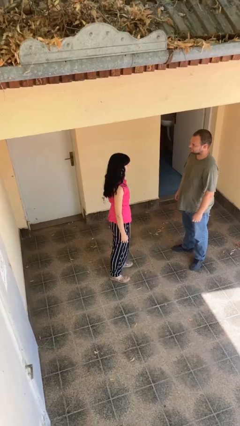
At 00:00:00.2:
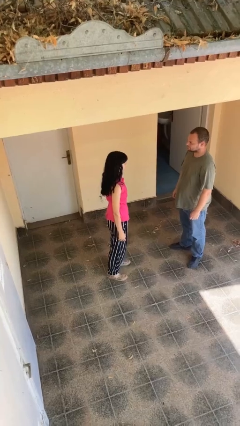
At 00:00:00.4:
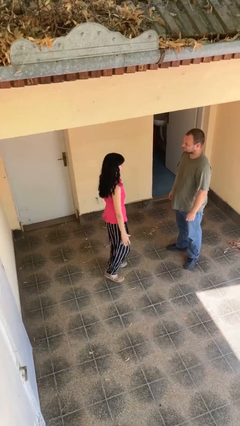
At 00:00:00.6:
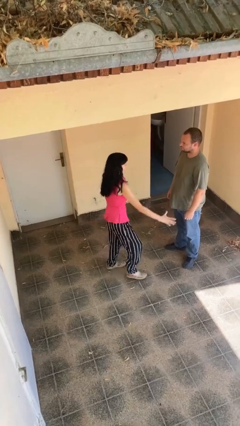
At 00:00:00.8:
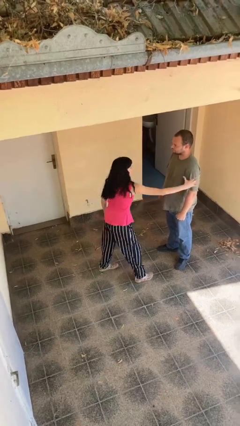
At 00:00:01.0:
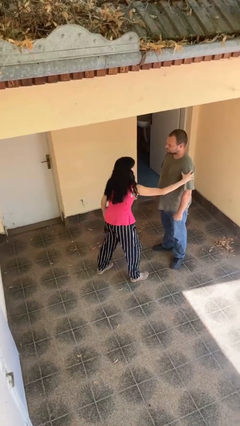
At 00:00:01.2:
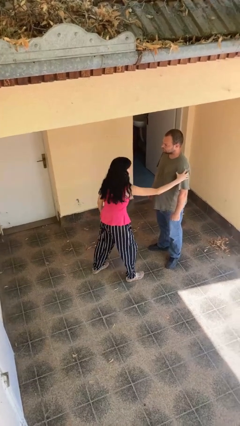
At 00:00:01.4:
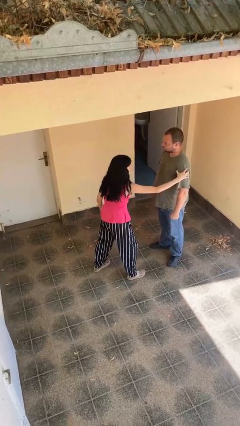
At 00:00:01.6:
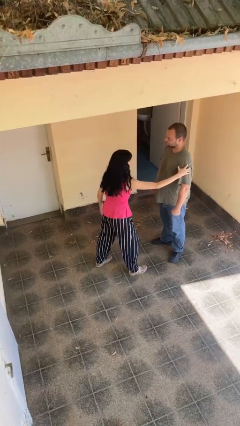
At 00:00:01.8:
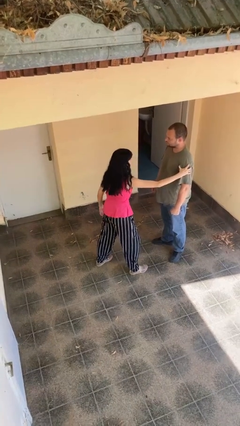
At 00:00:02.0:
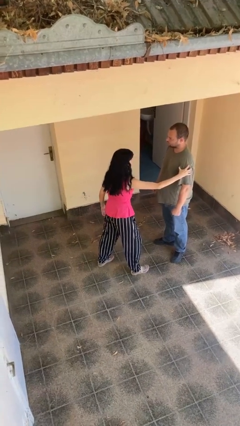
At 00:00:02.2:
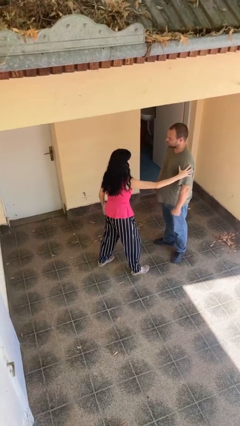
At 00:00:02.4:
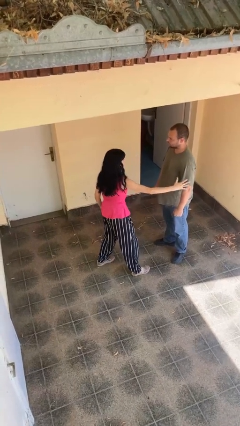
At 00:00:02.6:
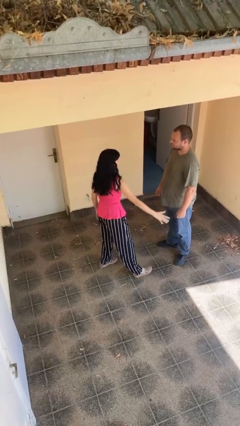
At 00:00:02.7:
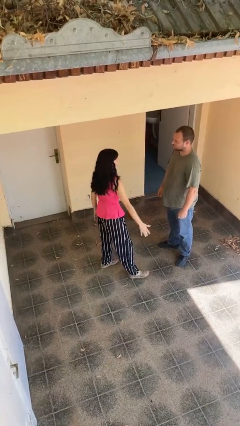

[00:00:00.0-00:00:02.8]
person grabs person by bicep

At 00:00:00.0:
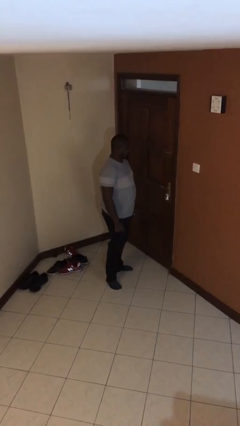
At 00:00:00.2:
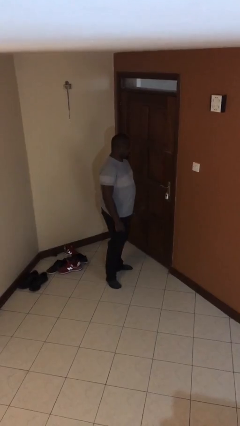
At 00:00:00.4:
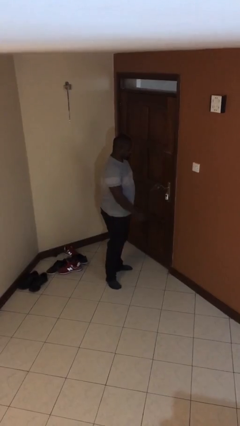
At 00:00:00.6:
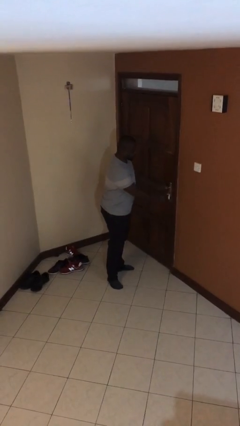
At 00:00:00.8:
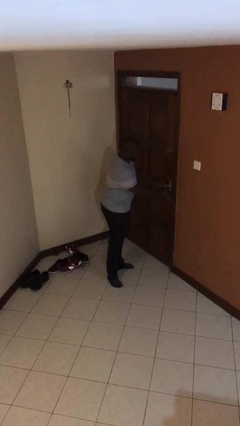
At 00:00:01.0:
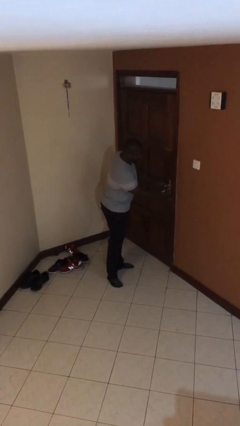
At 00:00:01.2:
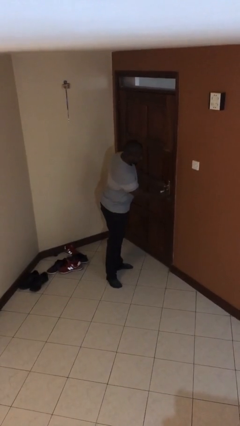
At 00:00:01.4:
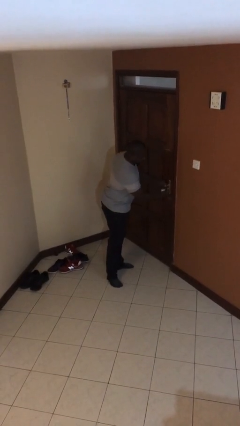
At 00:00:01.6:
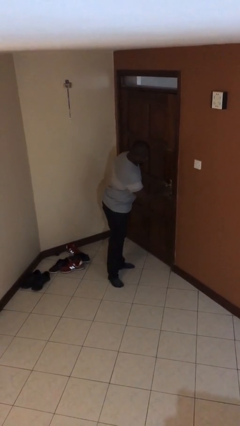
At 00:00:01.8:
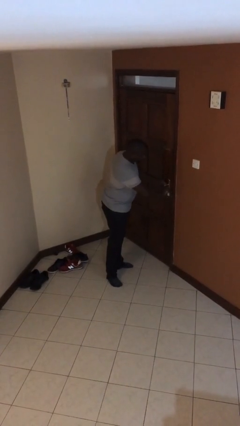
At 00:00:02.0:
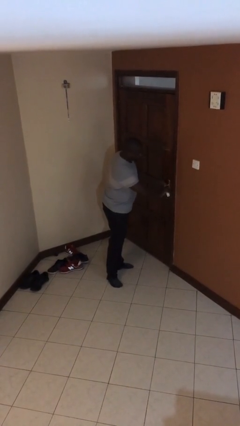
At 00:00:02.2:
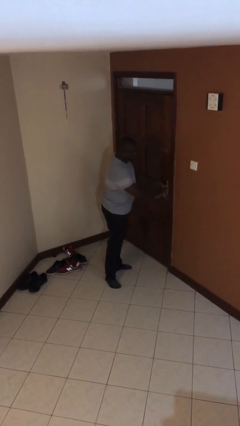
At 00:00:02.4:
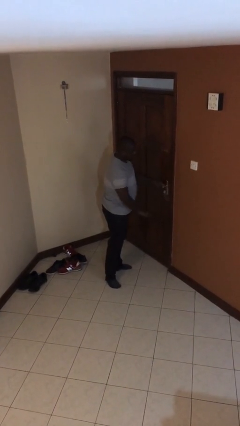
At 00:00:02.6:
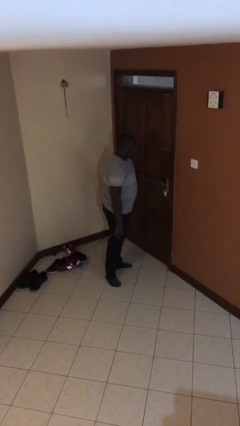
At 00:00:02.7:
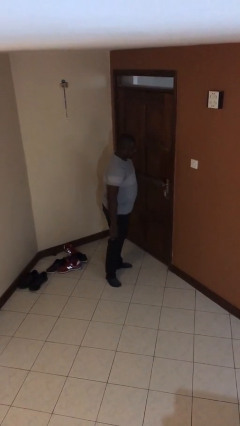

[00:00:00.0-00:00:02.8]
person unlocks door with keys

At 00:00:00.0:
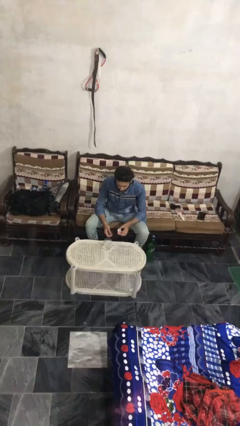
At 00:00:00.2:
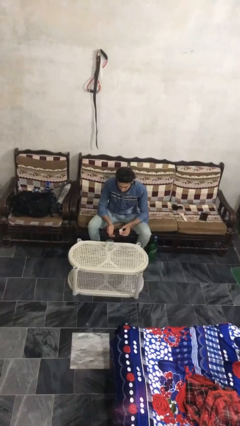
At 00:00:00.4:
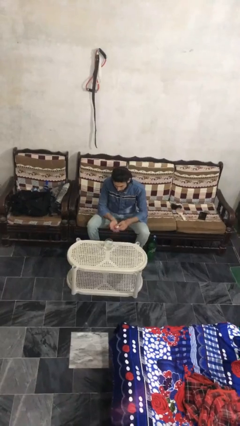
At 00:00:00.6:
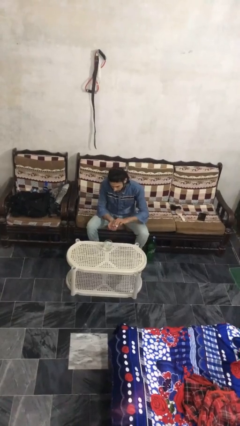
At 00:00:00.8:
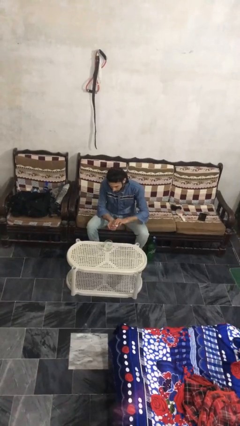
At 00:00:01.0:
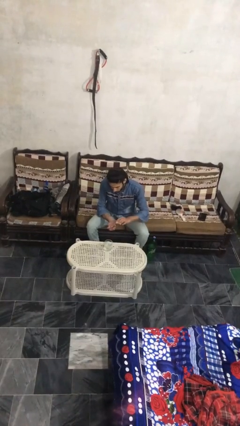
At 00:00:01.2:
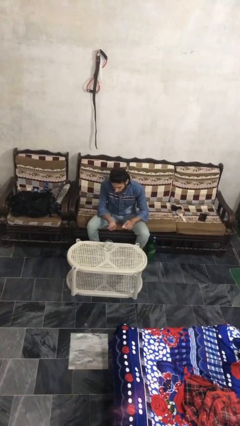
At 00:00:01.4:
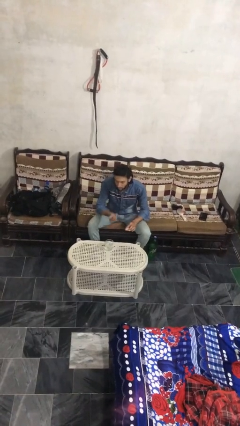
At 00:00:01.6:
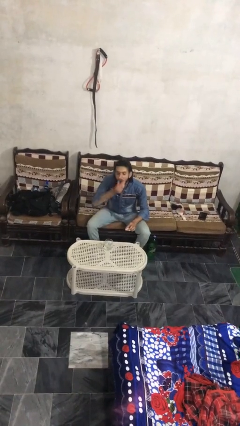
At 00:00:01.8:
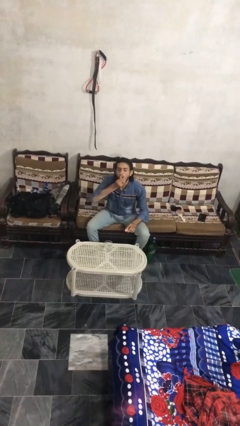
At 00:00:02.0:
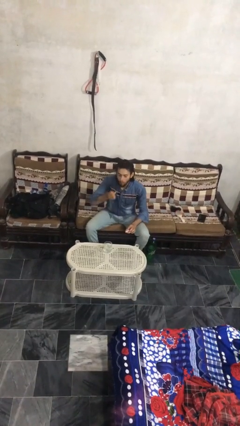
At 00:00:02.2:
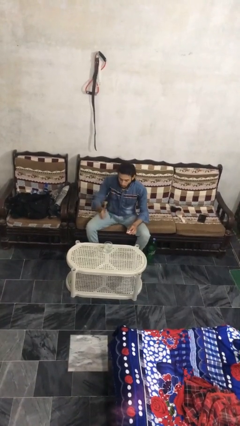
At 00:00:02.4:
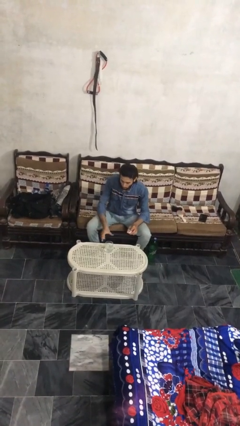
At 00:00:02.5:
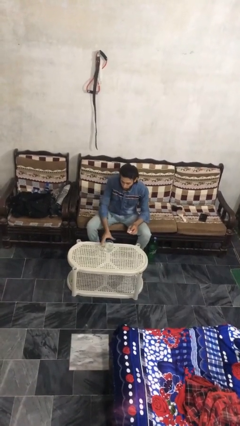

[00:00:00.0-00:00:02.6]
person takes medicine pills

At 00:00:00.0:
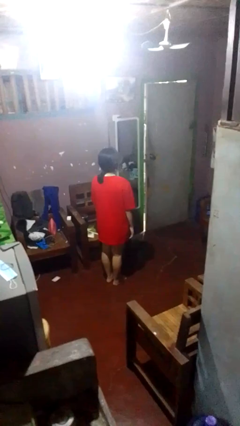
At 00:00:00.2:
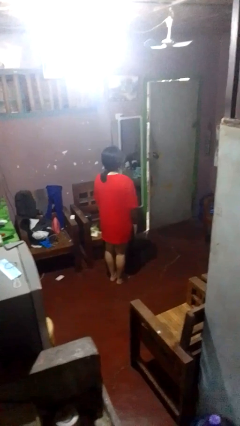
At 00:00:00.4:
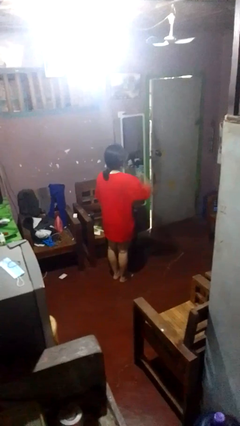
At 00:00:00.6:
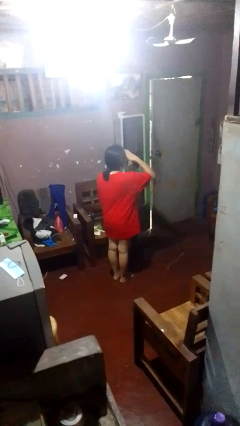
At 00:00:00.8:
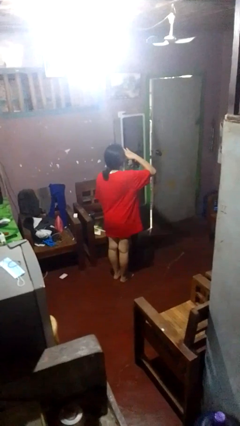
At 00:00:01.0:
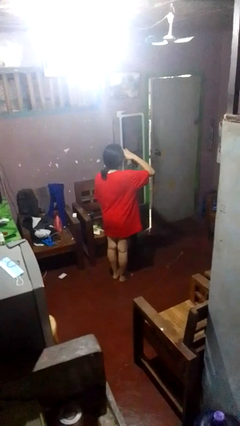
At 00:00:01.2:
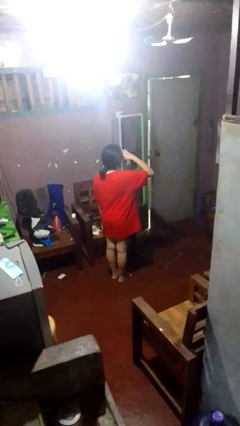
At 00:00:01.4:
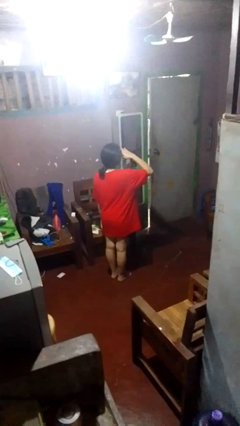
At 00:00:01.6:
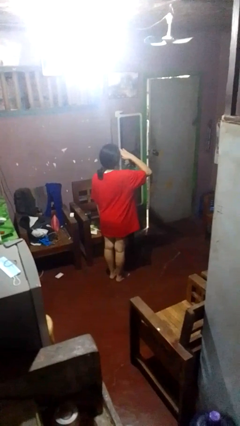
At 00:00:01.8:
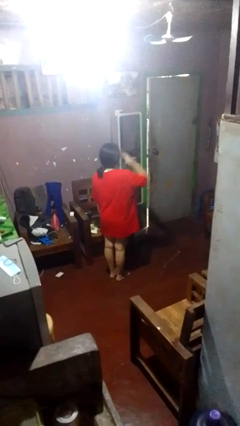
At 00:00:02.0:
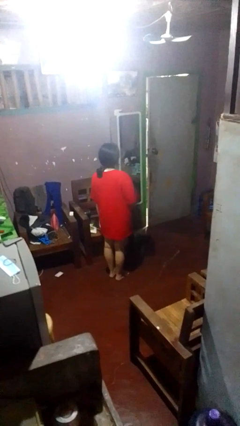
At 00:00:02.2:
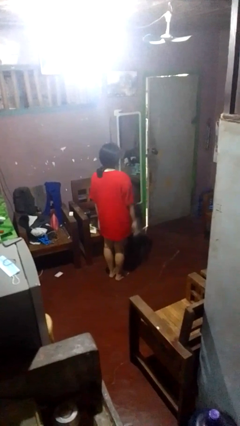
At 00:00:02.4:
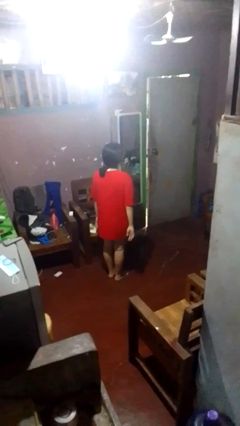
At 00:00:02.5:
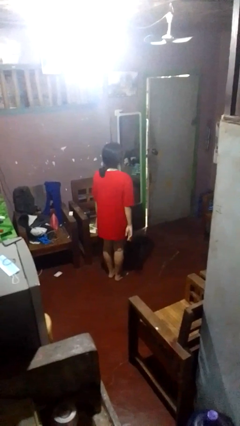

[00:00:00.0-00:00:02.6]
person salutes

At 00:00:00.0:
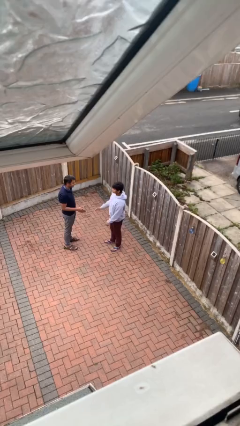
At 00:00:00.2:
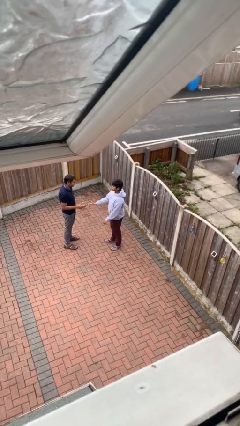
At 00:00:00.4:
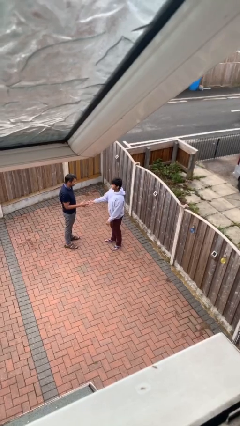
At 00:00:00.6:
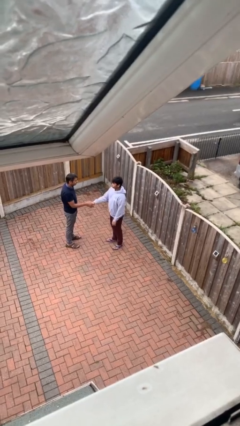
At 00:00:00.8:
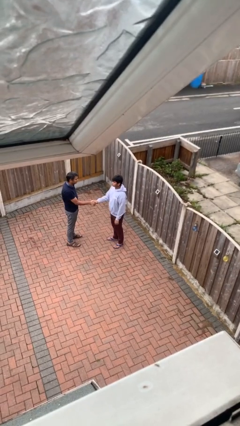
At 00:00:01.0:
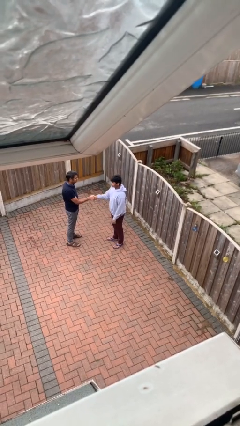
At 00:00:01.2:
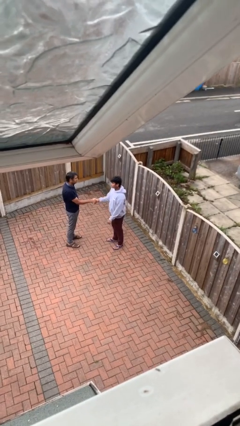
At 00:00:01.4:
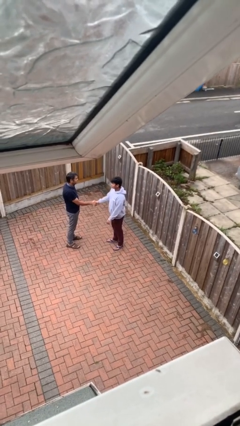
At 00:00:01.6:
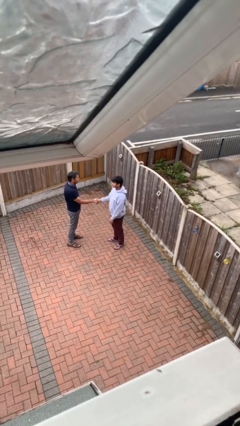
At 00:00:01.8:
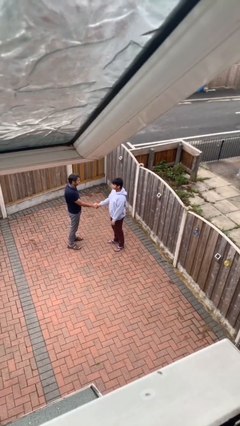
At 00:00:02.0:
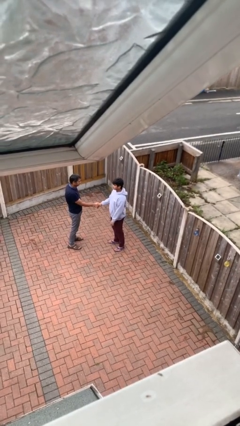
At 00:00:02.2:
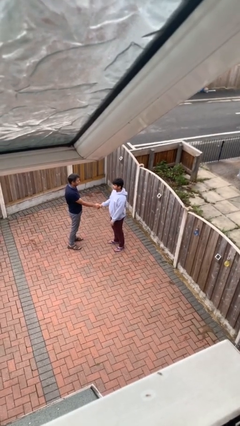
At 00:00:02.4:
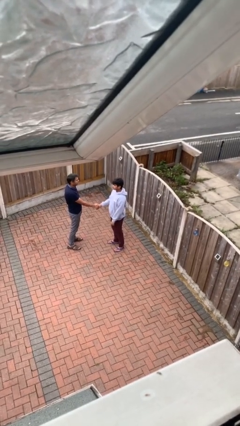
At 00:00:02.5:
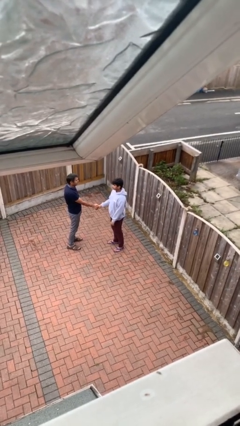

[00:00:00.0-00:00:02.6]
person shakes hand

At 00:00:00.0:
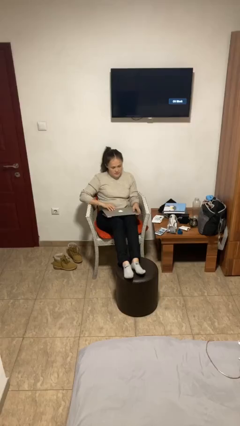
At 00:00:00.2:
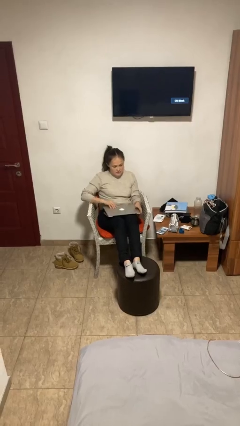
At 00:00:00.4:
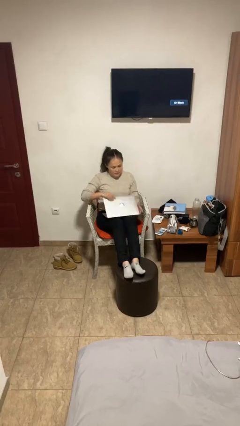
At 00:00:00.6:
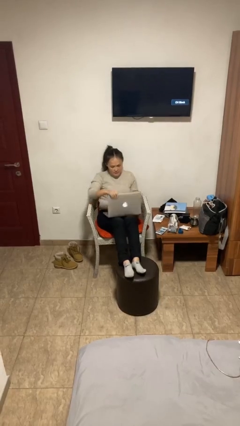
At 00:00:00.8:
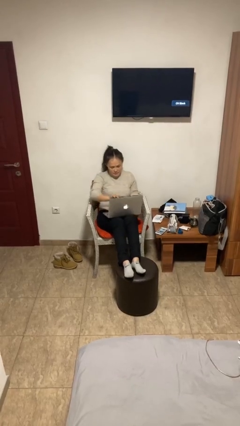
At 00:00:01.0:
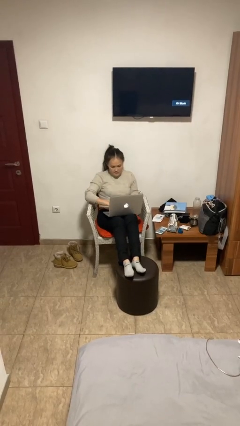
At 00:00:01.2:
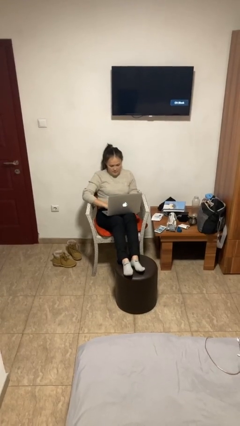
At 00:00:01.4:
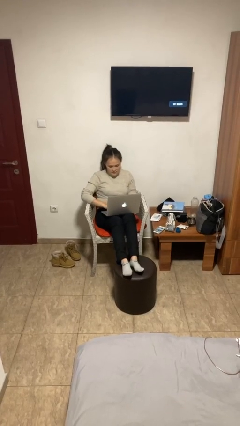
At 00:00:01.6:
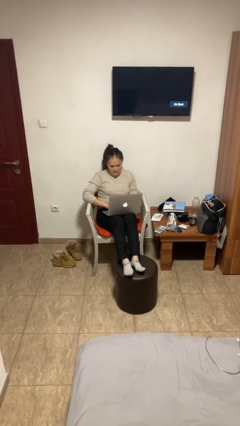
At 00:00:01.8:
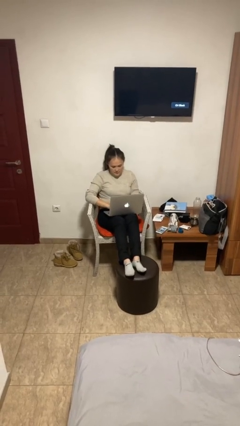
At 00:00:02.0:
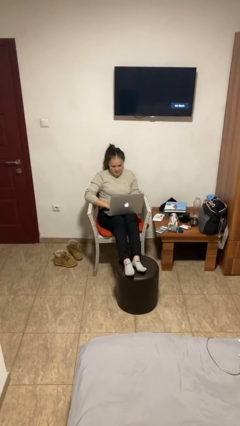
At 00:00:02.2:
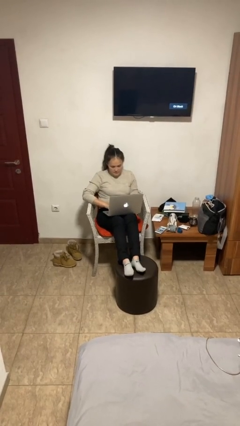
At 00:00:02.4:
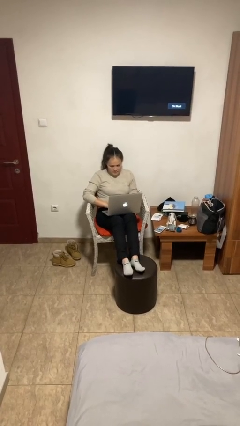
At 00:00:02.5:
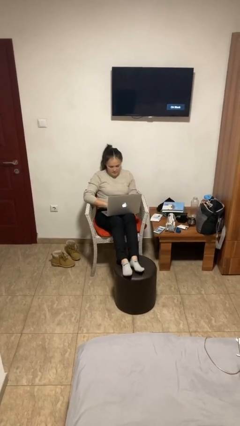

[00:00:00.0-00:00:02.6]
person interacts with laptop

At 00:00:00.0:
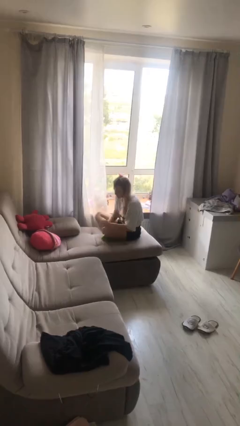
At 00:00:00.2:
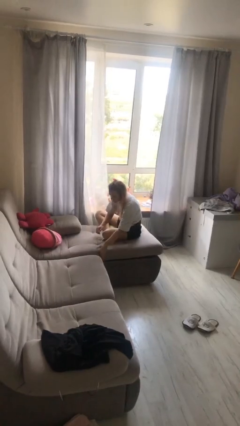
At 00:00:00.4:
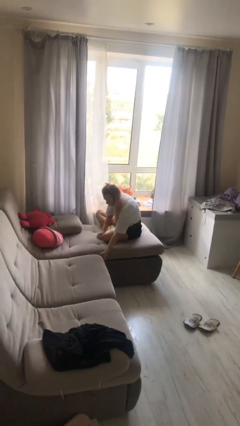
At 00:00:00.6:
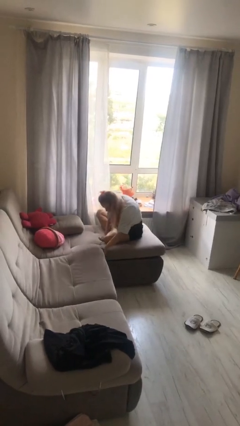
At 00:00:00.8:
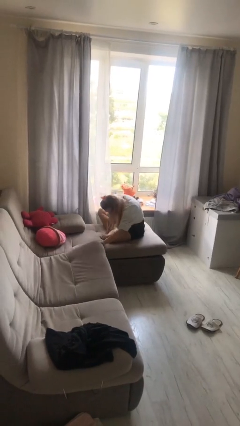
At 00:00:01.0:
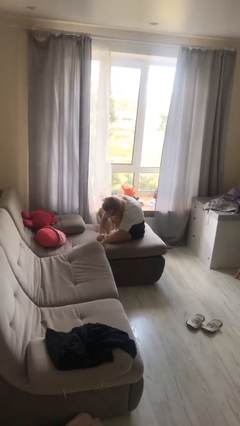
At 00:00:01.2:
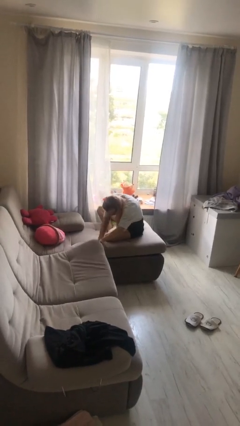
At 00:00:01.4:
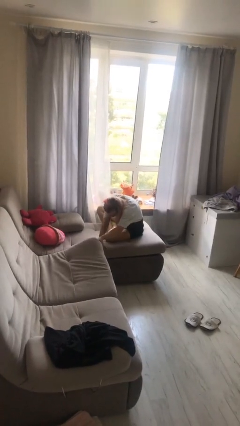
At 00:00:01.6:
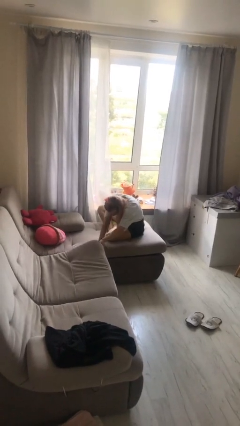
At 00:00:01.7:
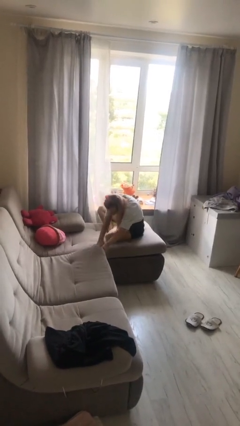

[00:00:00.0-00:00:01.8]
person searches under couch
